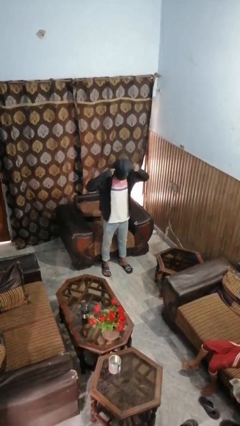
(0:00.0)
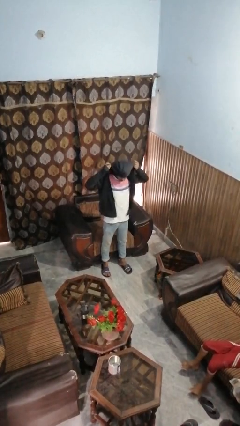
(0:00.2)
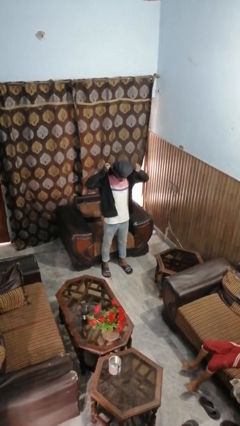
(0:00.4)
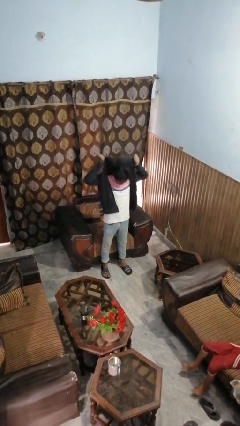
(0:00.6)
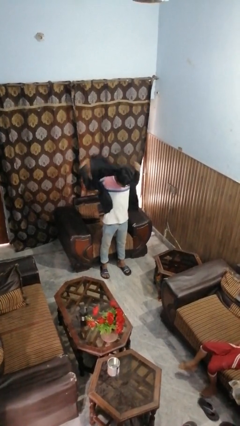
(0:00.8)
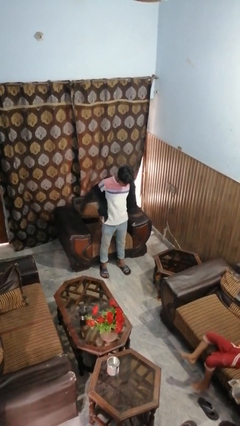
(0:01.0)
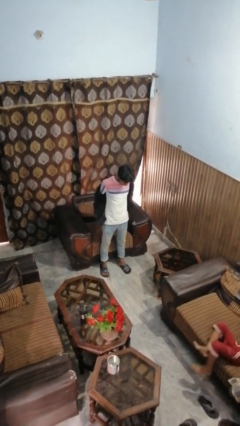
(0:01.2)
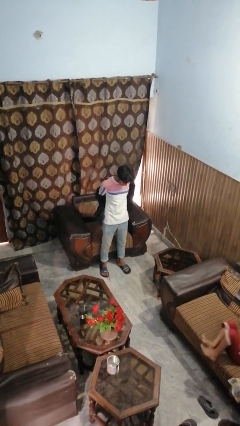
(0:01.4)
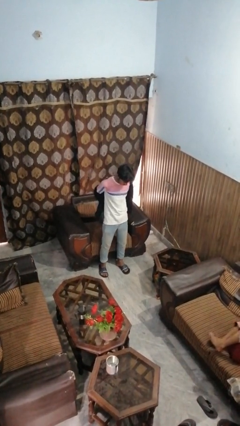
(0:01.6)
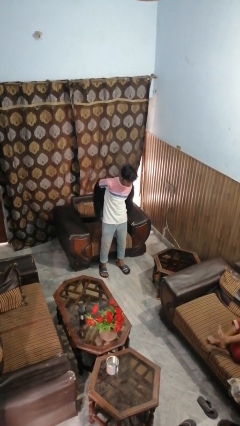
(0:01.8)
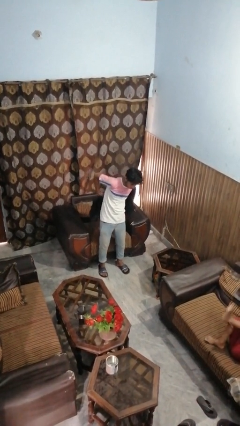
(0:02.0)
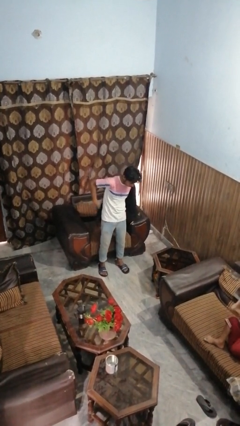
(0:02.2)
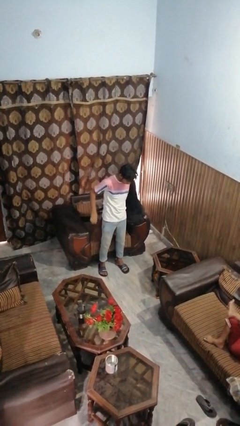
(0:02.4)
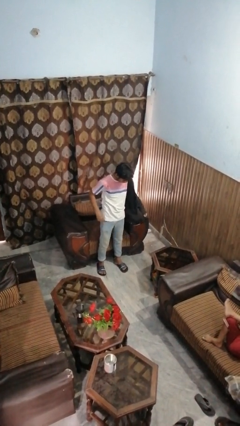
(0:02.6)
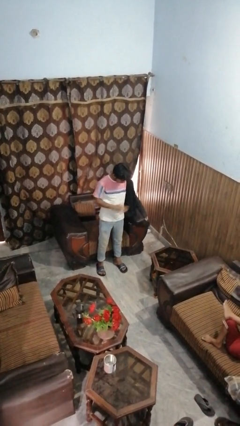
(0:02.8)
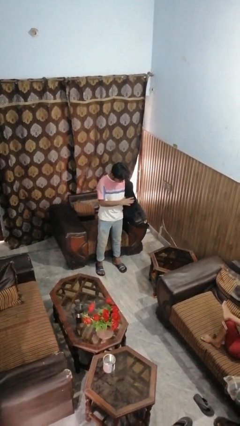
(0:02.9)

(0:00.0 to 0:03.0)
person takes off hoodie

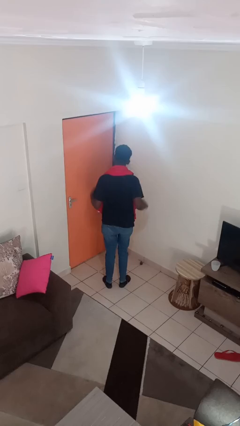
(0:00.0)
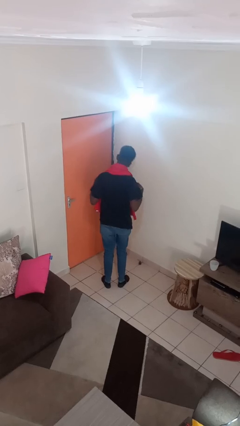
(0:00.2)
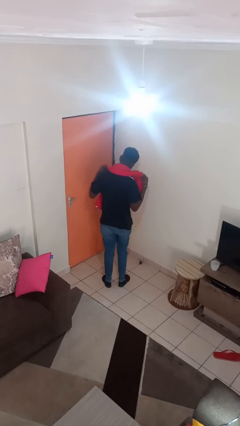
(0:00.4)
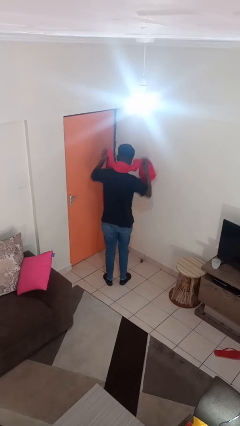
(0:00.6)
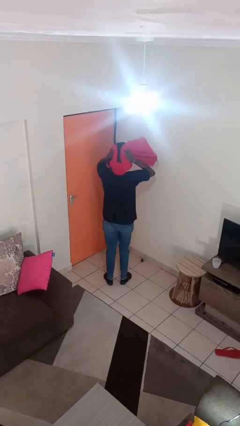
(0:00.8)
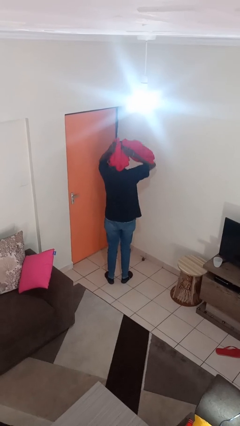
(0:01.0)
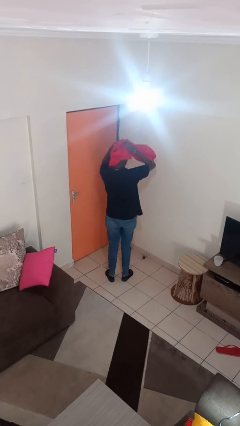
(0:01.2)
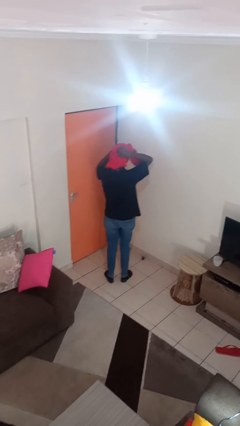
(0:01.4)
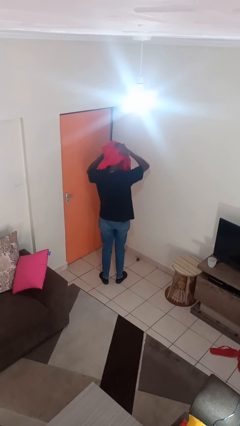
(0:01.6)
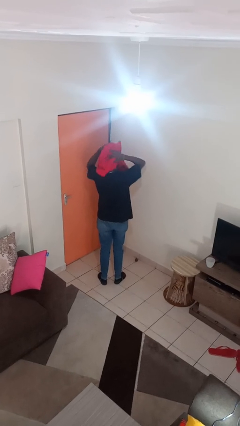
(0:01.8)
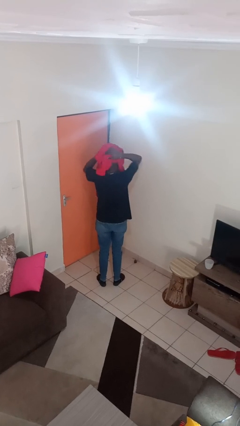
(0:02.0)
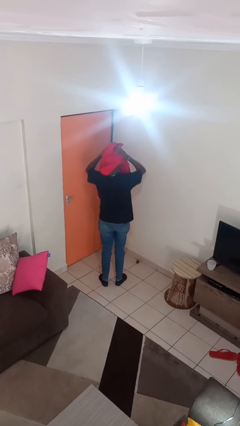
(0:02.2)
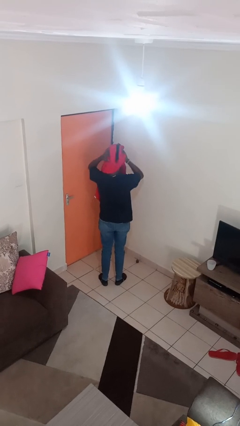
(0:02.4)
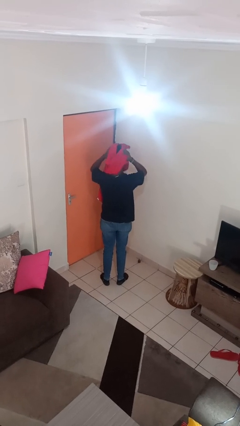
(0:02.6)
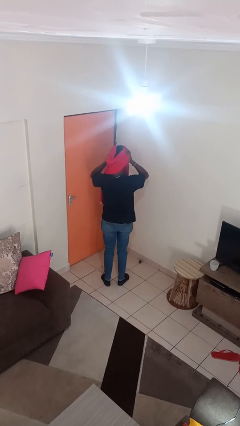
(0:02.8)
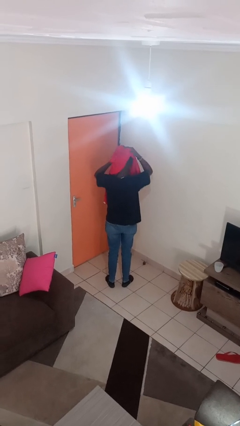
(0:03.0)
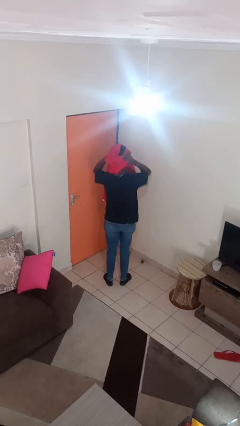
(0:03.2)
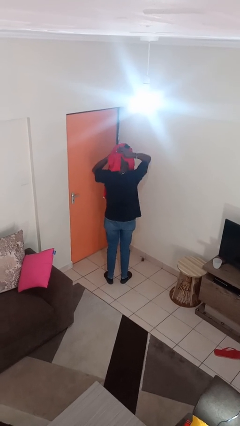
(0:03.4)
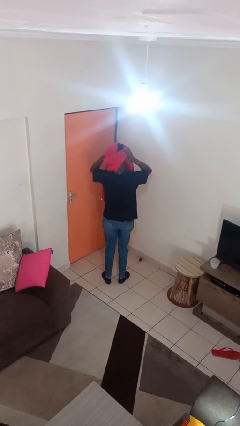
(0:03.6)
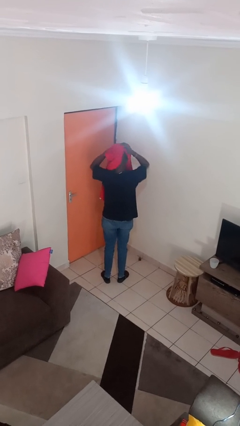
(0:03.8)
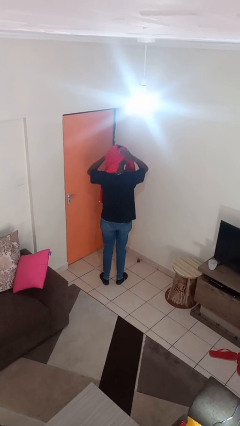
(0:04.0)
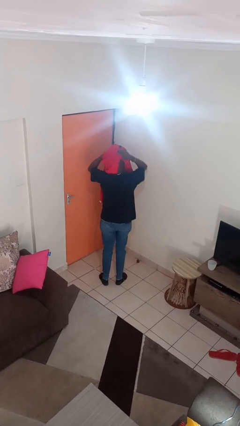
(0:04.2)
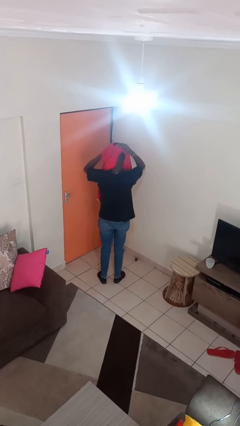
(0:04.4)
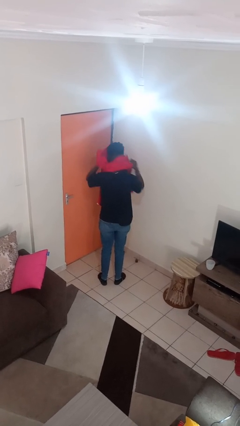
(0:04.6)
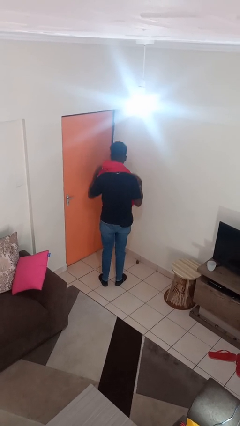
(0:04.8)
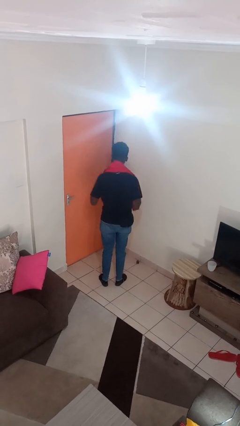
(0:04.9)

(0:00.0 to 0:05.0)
person dries hair with towel

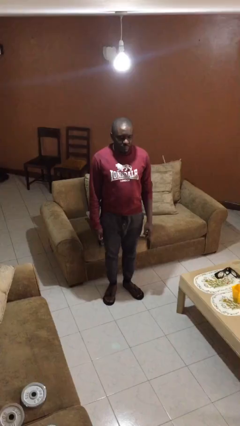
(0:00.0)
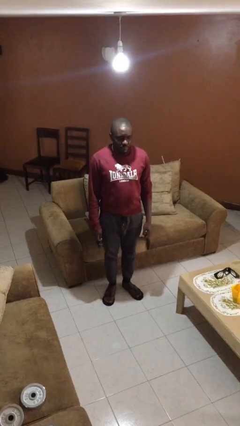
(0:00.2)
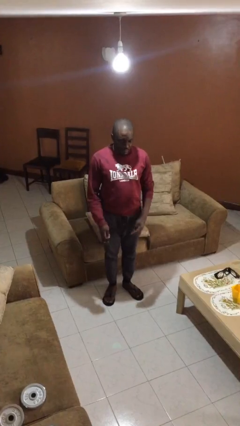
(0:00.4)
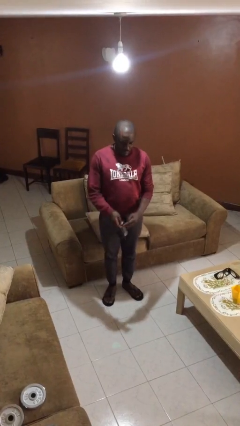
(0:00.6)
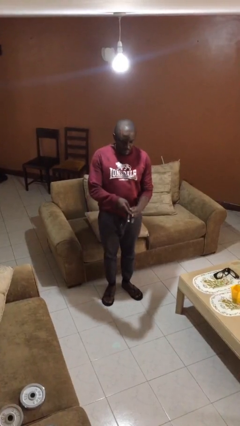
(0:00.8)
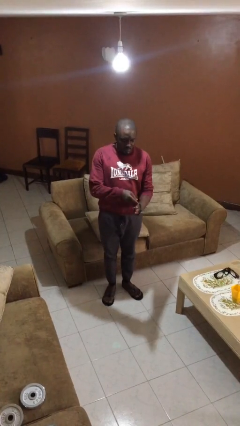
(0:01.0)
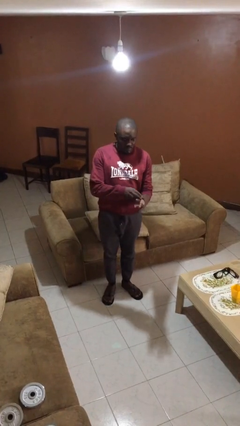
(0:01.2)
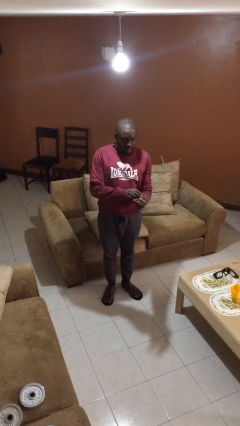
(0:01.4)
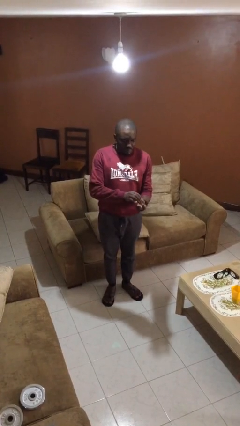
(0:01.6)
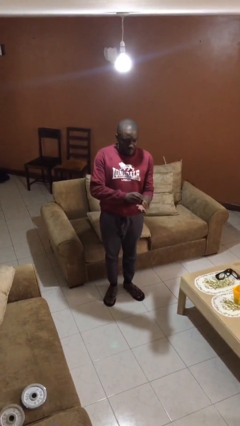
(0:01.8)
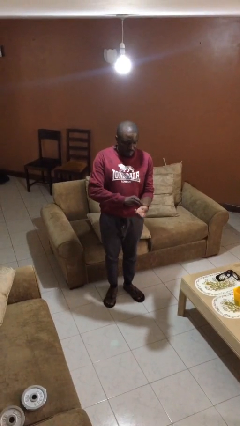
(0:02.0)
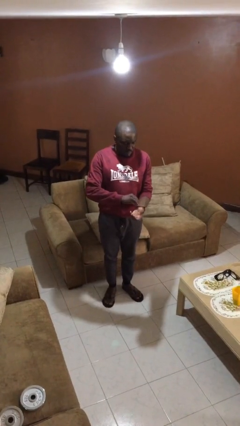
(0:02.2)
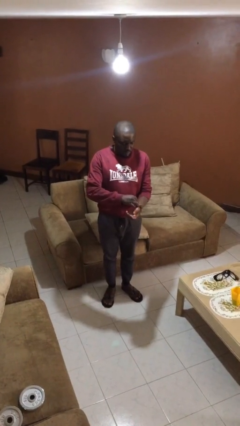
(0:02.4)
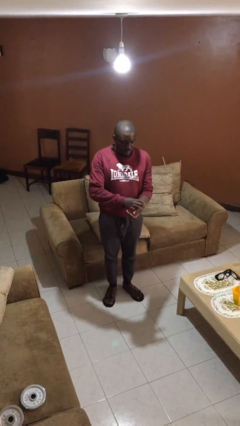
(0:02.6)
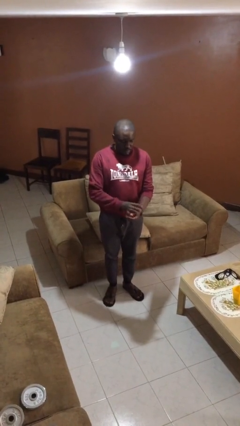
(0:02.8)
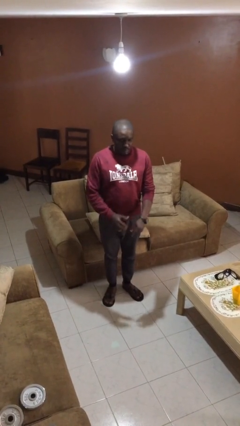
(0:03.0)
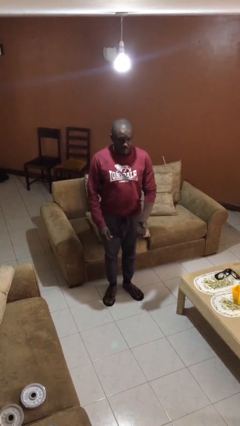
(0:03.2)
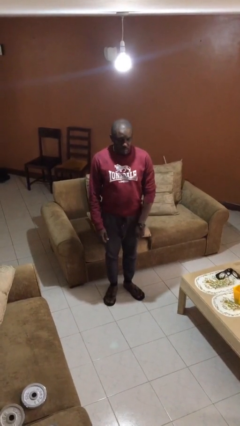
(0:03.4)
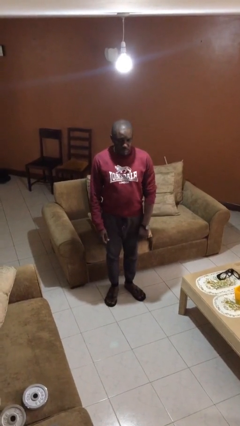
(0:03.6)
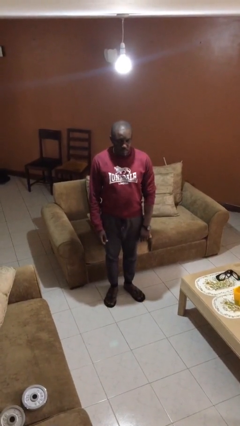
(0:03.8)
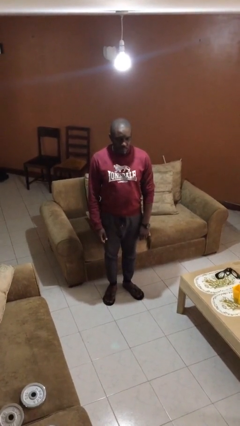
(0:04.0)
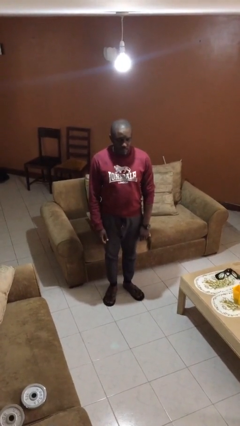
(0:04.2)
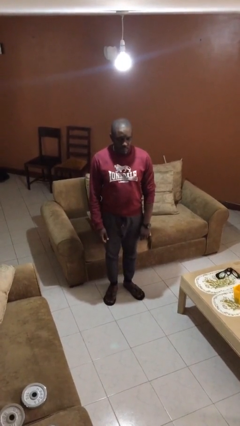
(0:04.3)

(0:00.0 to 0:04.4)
person puts on wristwatch

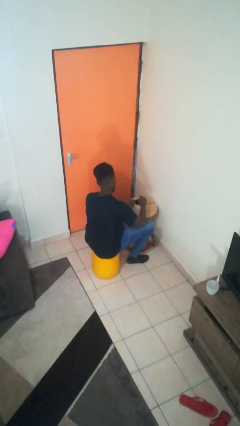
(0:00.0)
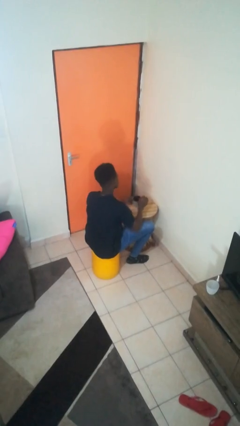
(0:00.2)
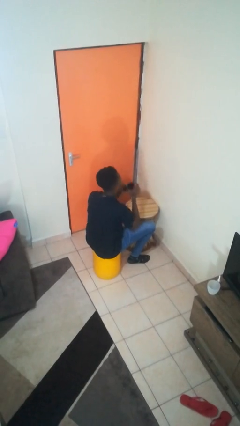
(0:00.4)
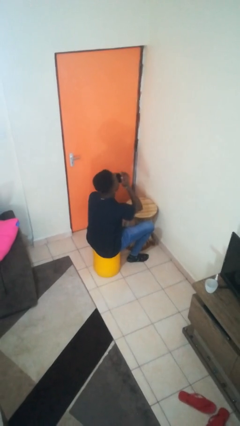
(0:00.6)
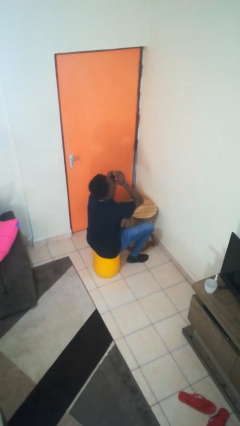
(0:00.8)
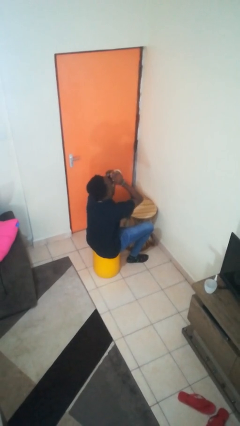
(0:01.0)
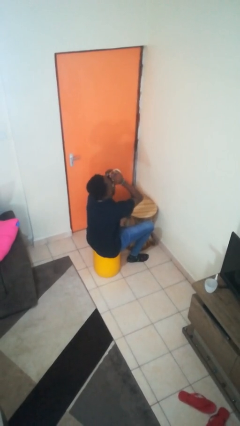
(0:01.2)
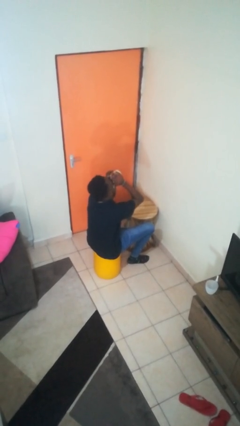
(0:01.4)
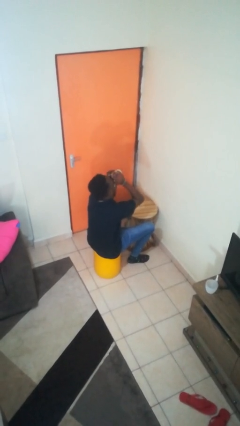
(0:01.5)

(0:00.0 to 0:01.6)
person drinks from mug

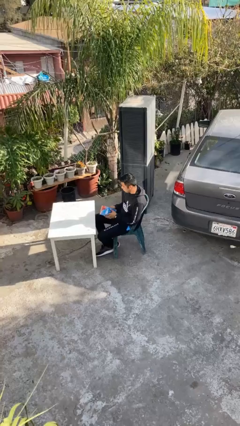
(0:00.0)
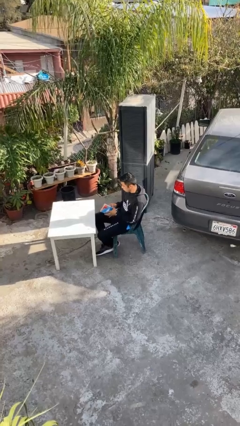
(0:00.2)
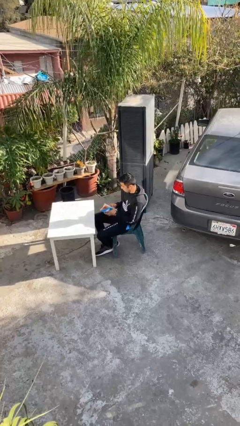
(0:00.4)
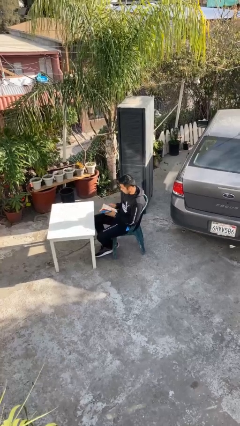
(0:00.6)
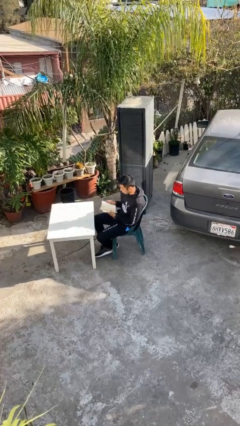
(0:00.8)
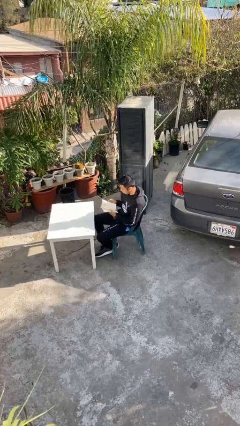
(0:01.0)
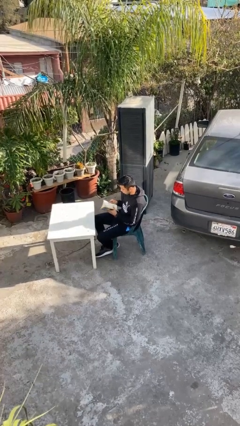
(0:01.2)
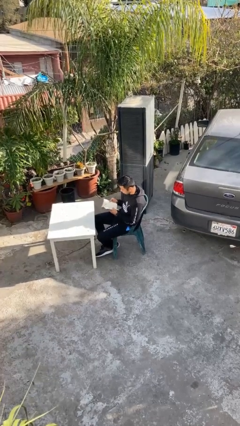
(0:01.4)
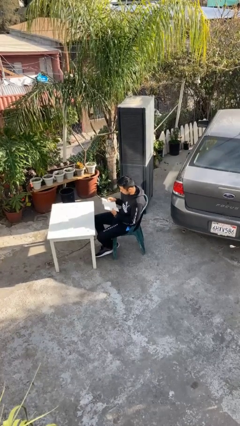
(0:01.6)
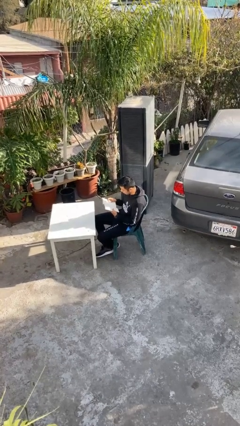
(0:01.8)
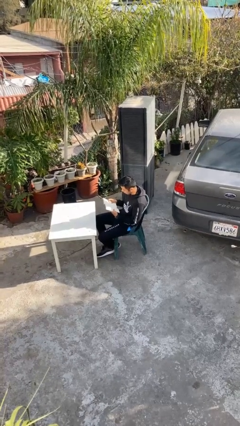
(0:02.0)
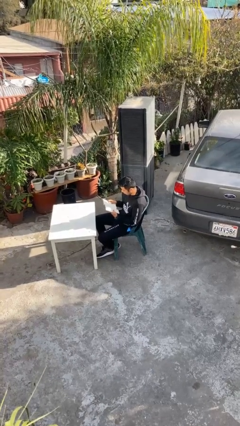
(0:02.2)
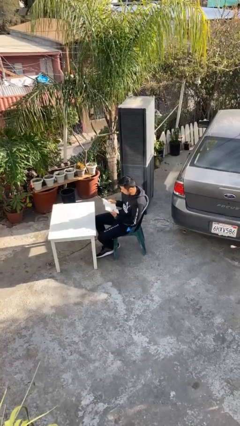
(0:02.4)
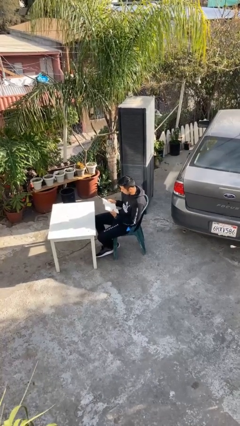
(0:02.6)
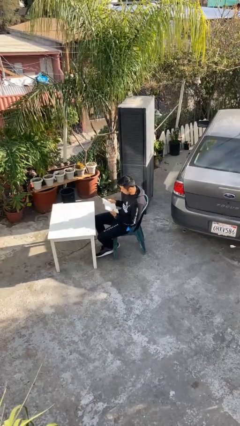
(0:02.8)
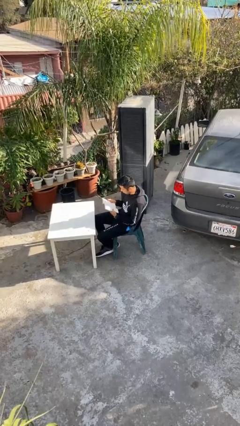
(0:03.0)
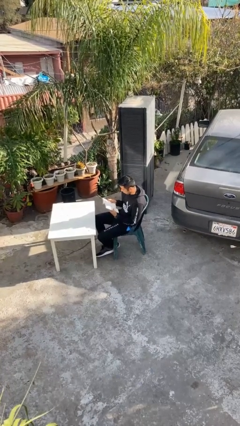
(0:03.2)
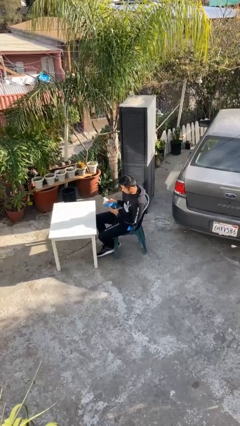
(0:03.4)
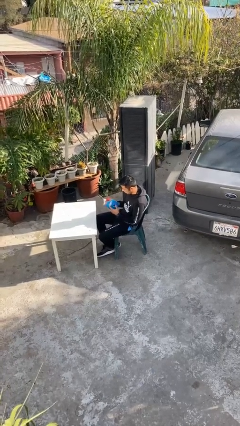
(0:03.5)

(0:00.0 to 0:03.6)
person reads document

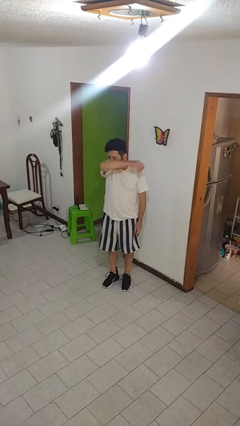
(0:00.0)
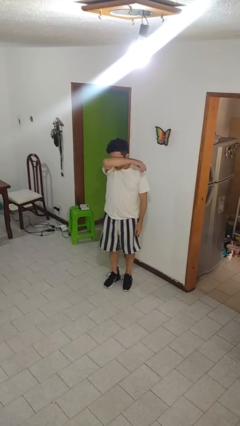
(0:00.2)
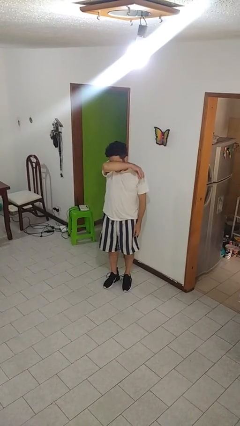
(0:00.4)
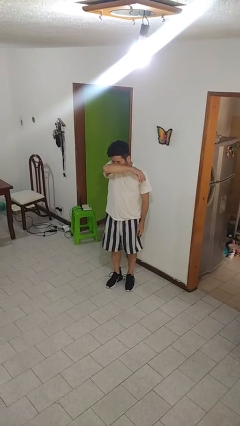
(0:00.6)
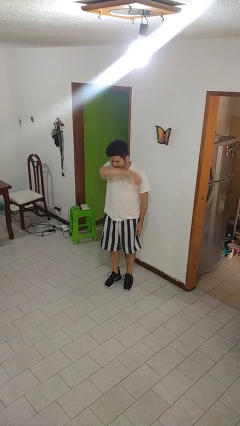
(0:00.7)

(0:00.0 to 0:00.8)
person sneezes into arm
